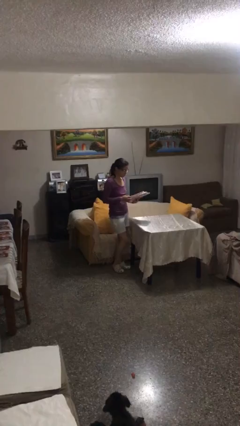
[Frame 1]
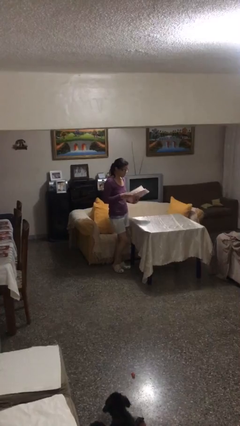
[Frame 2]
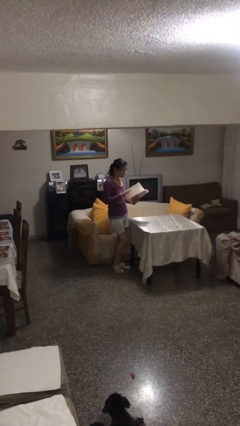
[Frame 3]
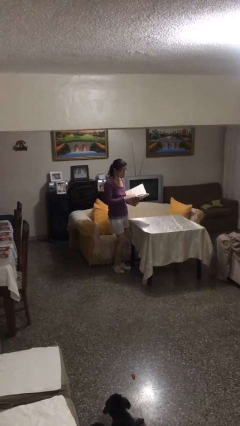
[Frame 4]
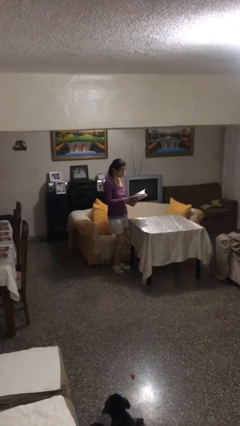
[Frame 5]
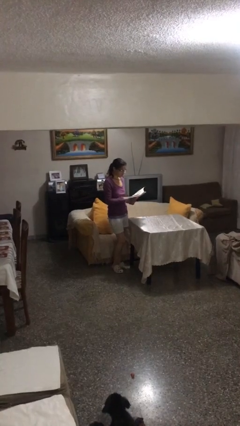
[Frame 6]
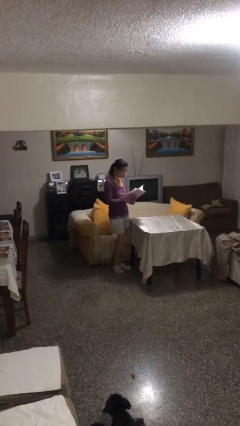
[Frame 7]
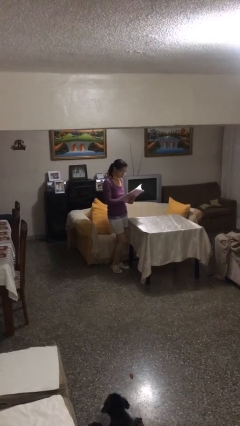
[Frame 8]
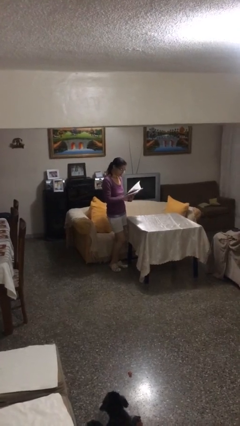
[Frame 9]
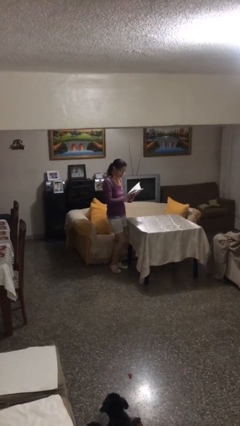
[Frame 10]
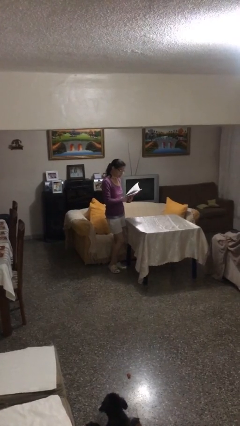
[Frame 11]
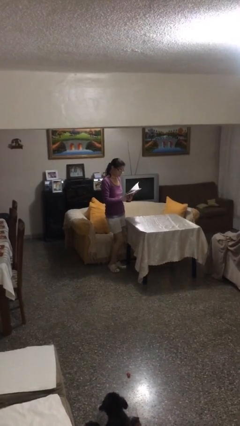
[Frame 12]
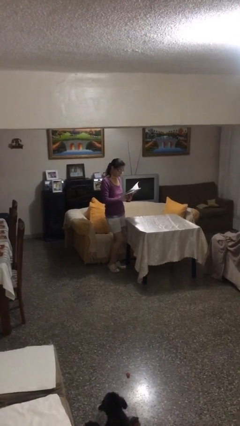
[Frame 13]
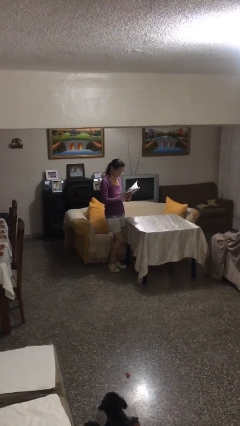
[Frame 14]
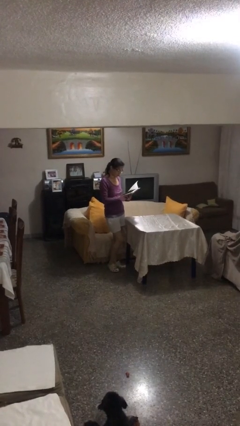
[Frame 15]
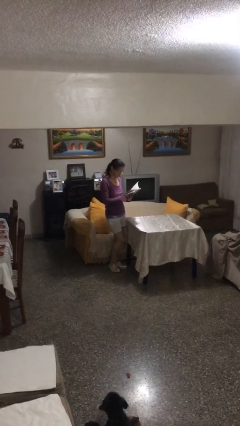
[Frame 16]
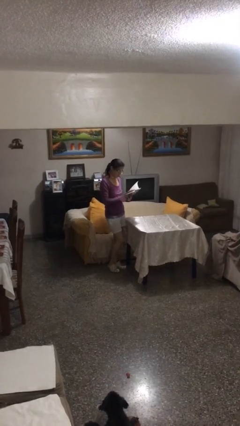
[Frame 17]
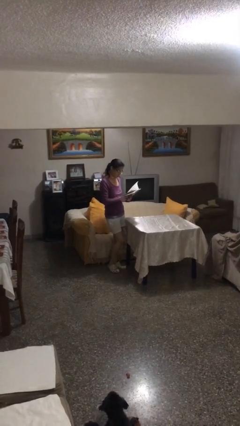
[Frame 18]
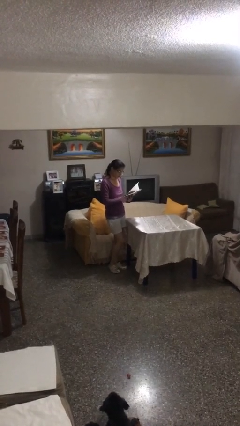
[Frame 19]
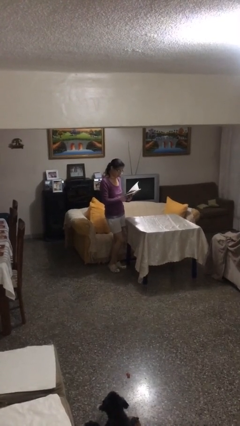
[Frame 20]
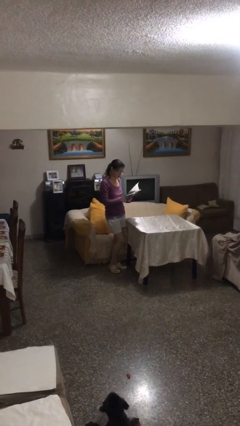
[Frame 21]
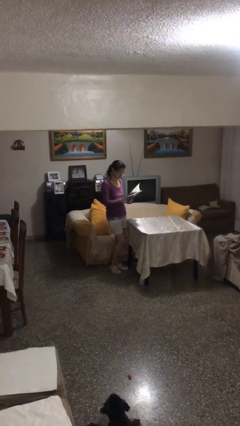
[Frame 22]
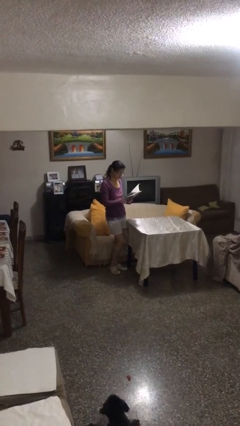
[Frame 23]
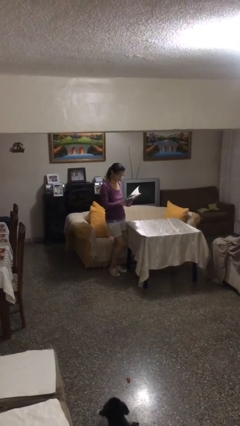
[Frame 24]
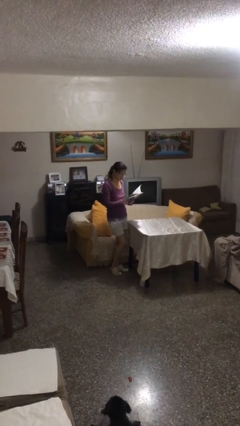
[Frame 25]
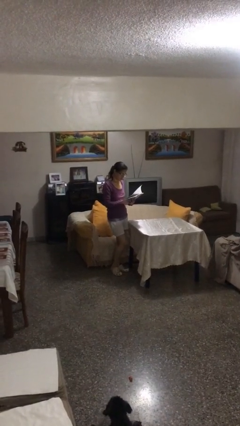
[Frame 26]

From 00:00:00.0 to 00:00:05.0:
person reads document

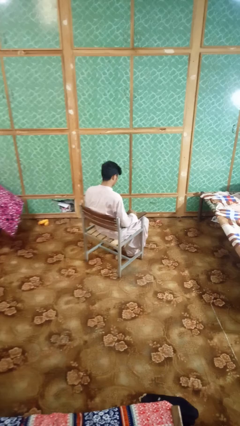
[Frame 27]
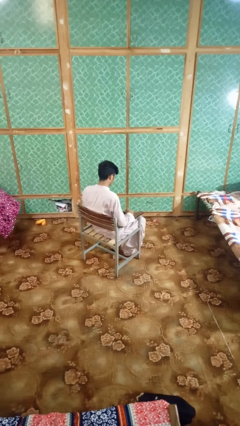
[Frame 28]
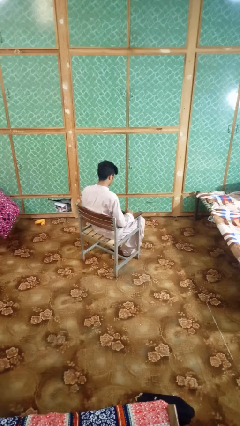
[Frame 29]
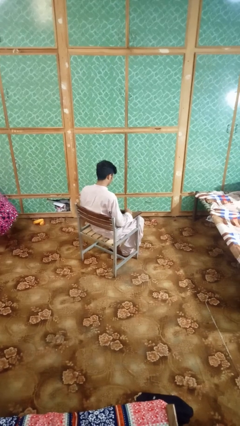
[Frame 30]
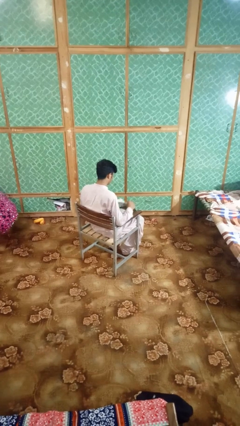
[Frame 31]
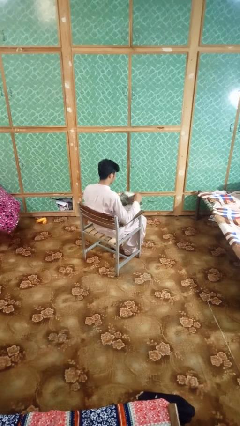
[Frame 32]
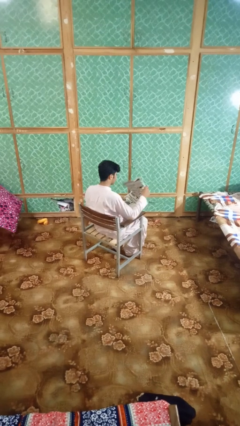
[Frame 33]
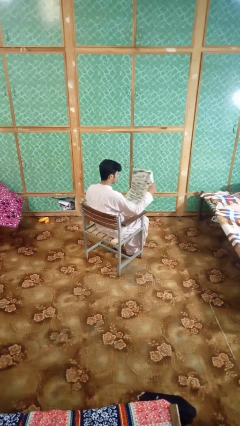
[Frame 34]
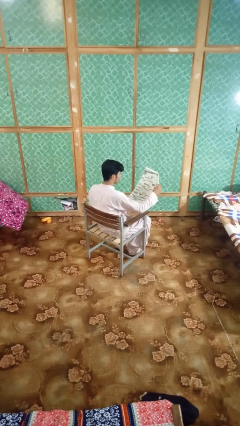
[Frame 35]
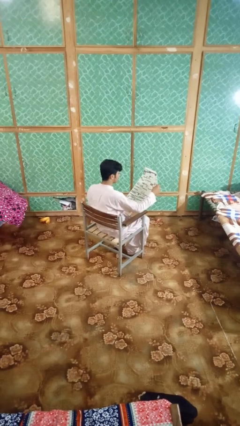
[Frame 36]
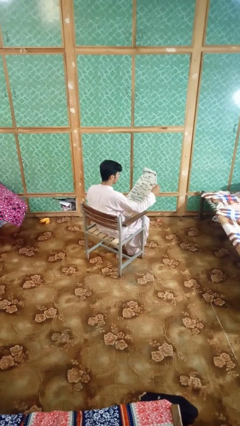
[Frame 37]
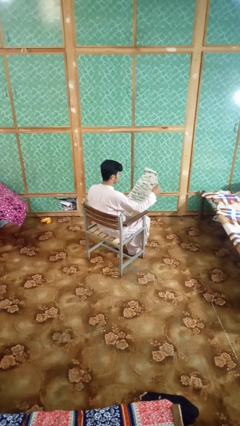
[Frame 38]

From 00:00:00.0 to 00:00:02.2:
person reads newspaper

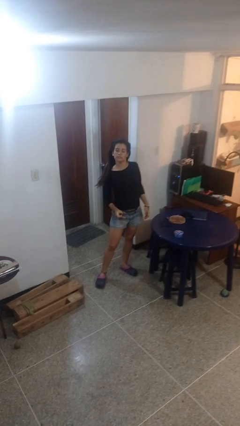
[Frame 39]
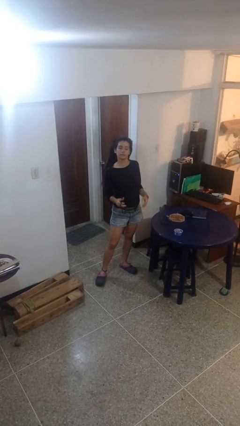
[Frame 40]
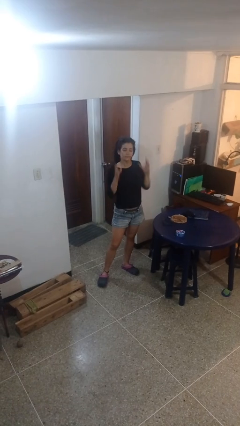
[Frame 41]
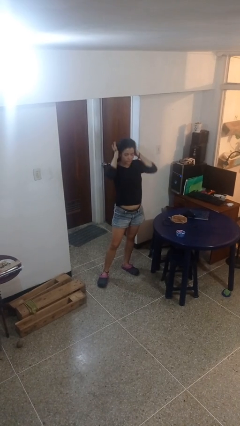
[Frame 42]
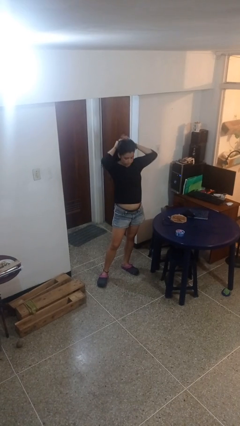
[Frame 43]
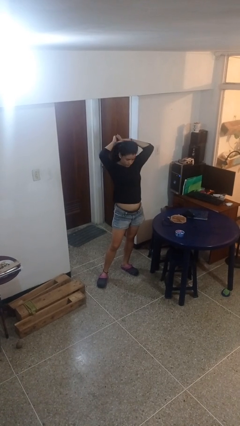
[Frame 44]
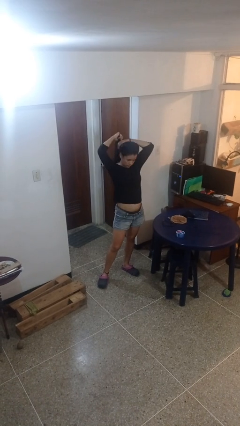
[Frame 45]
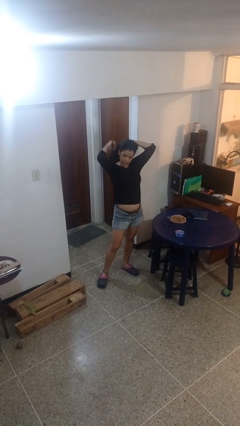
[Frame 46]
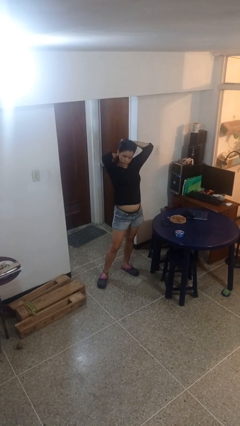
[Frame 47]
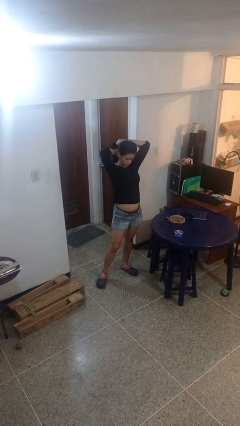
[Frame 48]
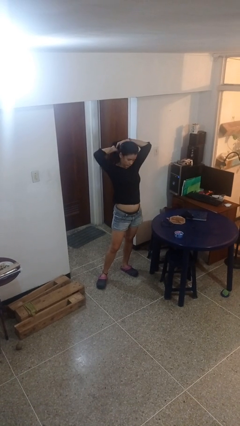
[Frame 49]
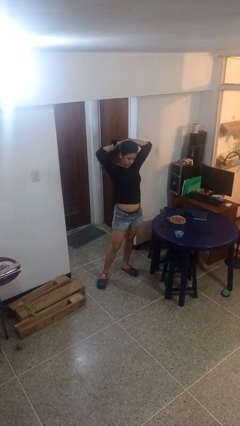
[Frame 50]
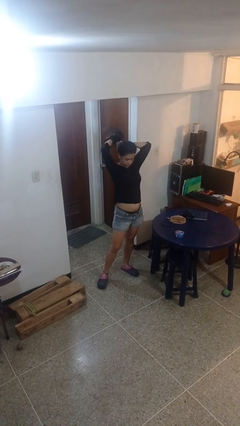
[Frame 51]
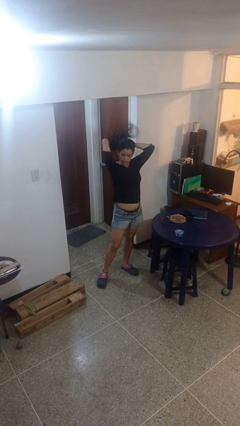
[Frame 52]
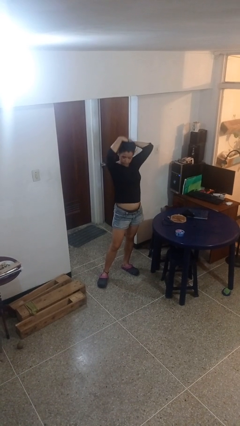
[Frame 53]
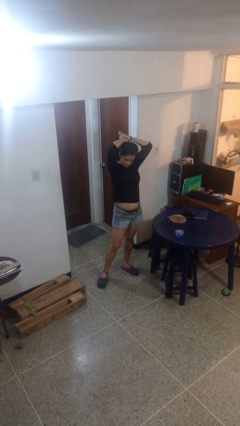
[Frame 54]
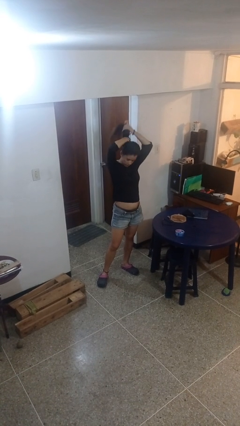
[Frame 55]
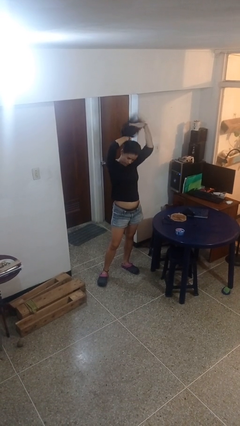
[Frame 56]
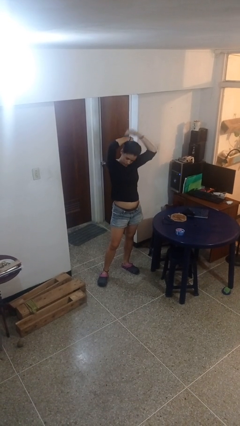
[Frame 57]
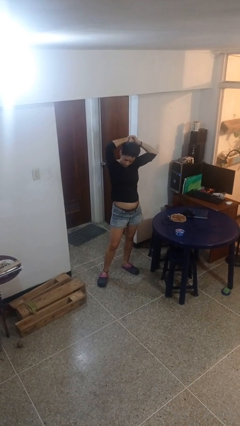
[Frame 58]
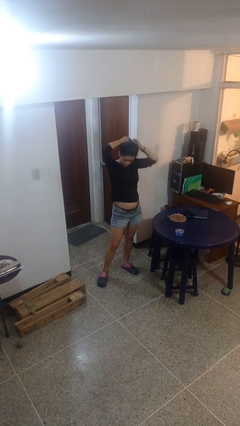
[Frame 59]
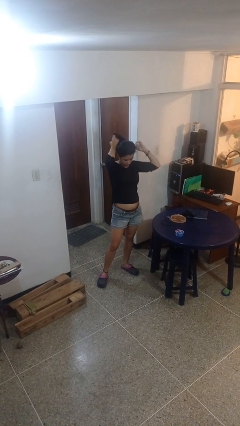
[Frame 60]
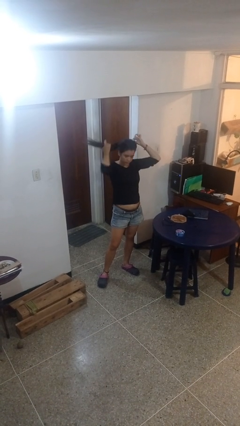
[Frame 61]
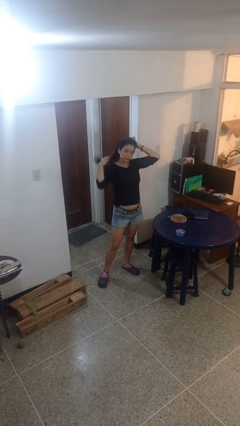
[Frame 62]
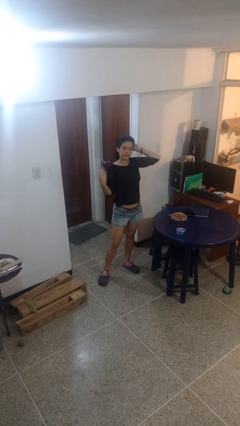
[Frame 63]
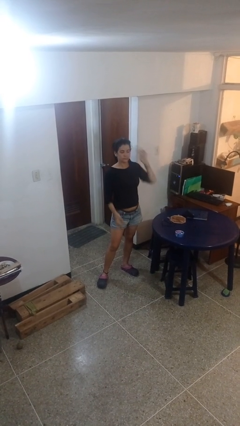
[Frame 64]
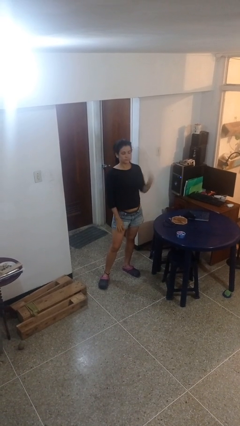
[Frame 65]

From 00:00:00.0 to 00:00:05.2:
person puts hair in ponytail

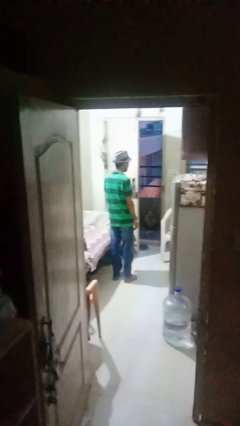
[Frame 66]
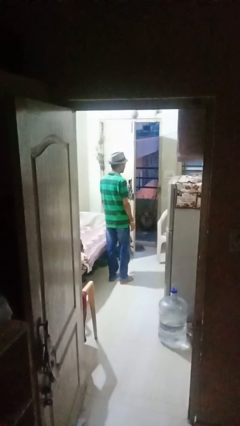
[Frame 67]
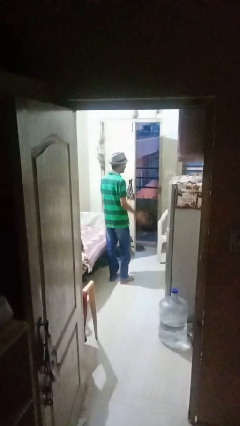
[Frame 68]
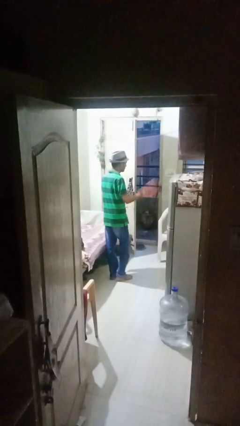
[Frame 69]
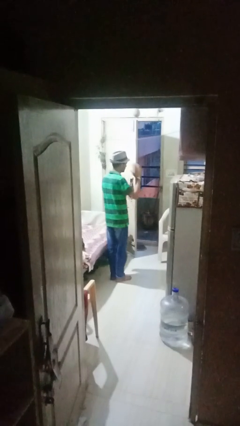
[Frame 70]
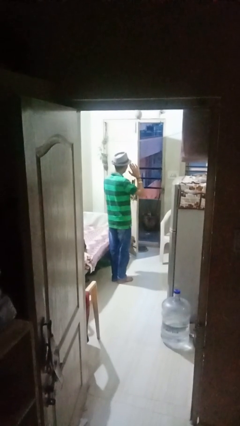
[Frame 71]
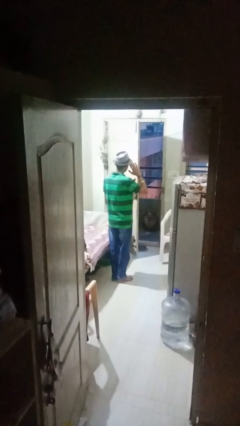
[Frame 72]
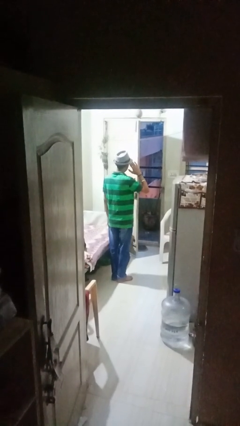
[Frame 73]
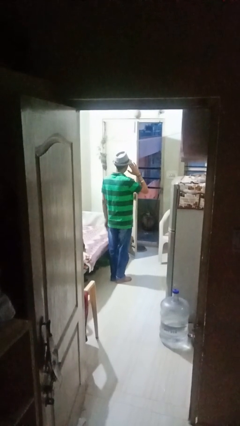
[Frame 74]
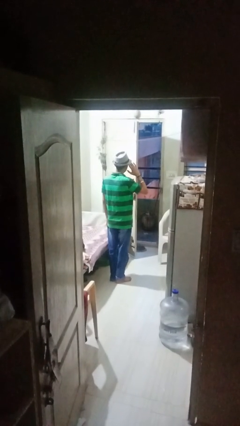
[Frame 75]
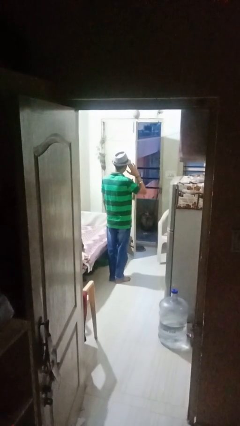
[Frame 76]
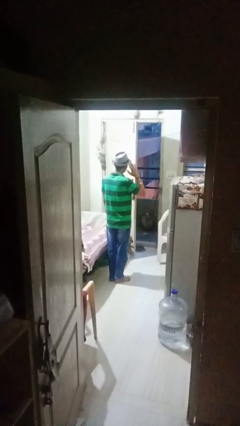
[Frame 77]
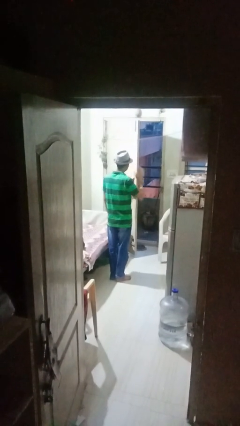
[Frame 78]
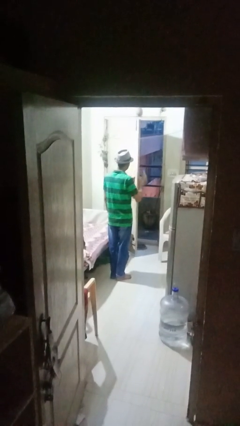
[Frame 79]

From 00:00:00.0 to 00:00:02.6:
person salutes

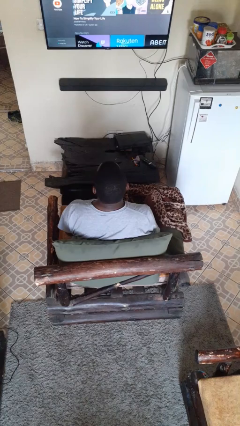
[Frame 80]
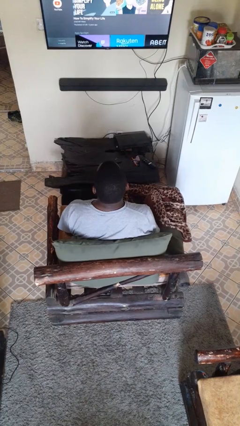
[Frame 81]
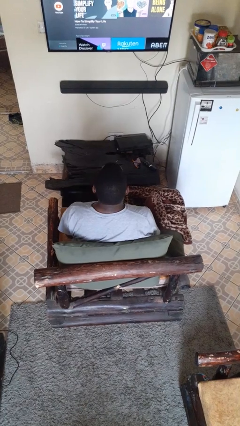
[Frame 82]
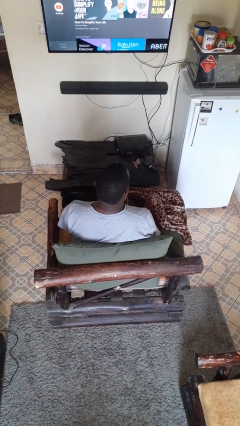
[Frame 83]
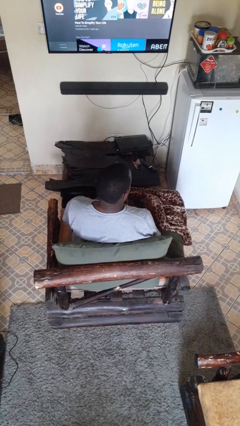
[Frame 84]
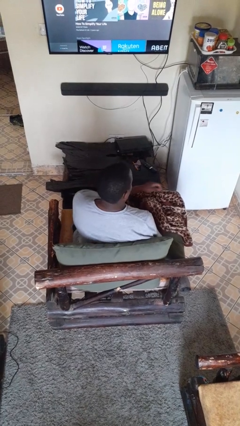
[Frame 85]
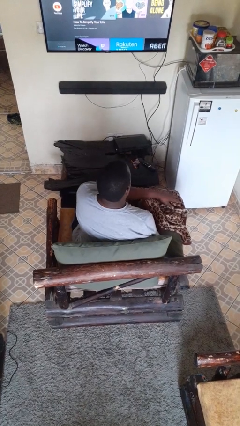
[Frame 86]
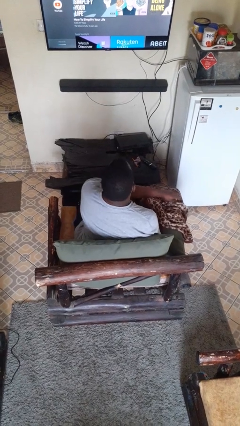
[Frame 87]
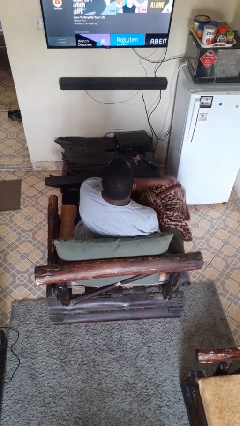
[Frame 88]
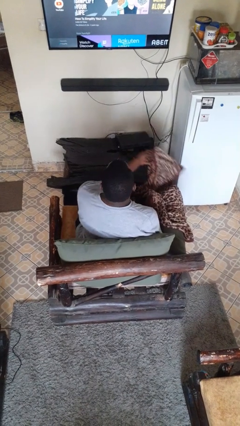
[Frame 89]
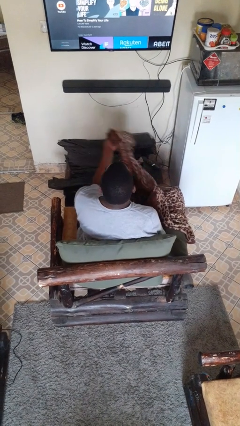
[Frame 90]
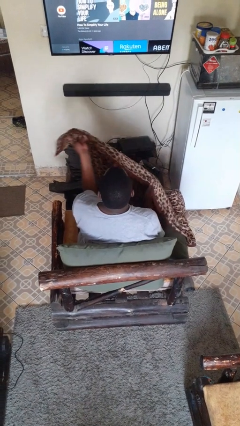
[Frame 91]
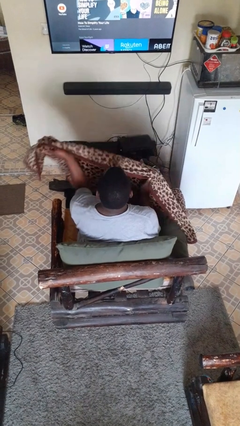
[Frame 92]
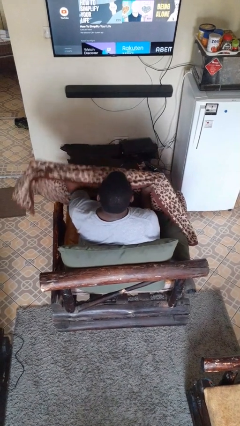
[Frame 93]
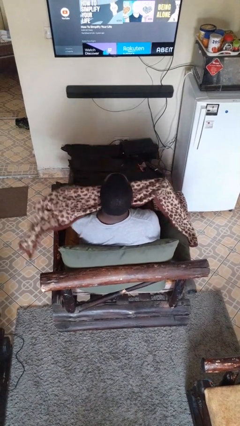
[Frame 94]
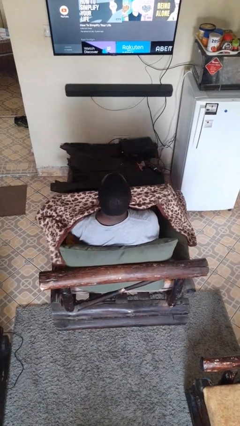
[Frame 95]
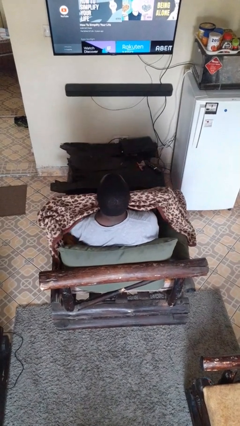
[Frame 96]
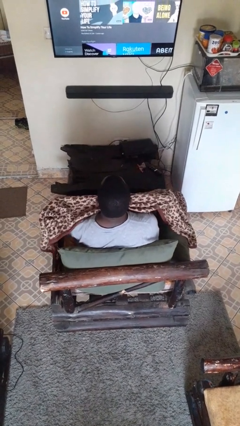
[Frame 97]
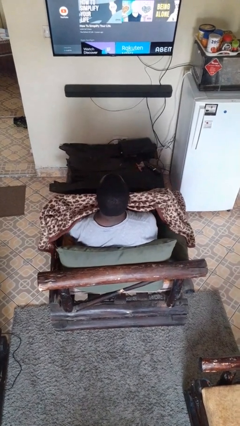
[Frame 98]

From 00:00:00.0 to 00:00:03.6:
person covers with blanket
